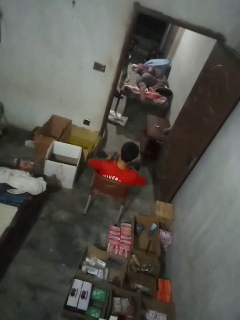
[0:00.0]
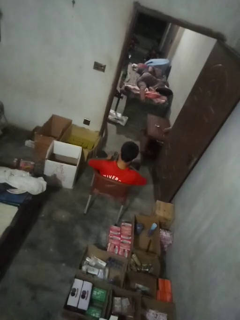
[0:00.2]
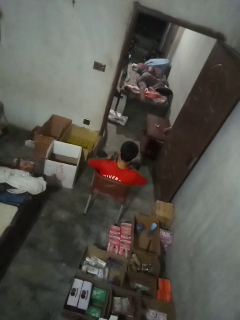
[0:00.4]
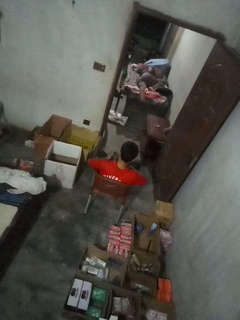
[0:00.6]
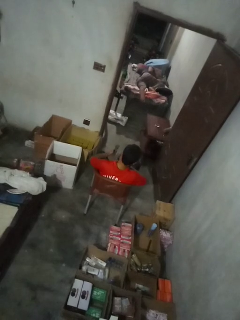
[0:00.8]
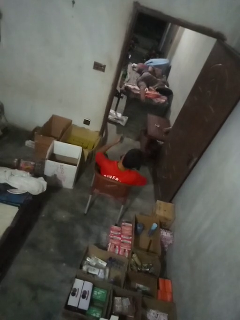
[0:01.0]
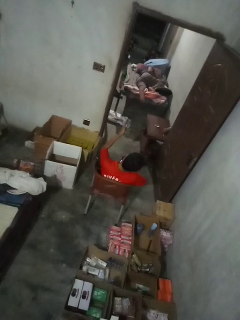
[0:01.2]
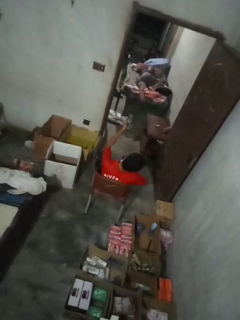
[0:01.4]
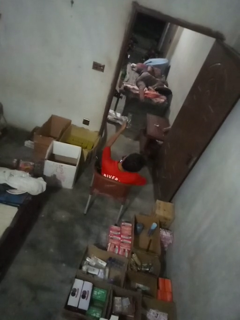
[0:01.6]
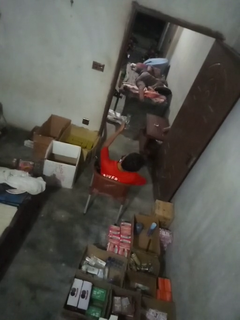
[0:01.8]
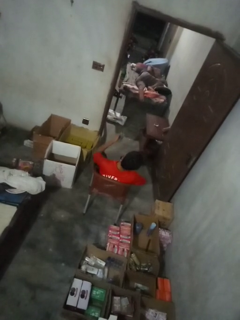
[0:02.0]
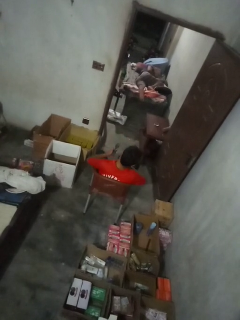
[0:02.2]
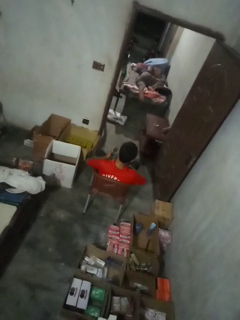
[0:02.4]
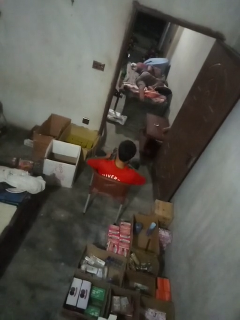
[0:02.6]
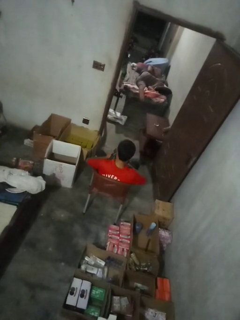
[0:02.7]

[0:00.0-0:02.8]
person uses television remote

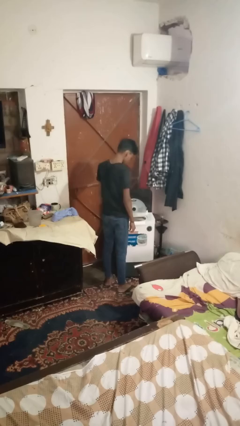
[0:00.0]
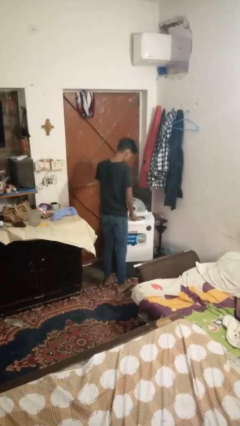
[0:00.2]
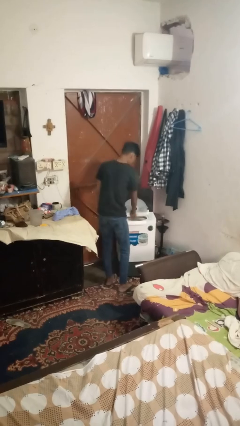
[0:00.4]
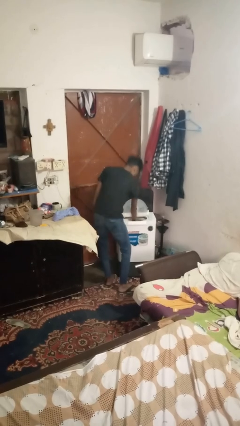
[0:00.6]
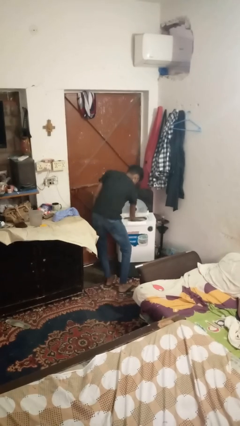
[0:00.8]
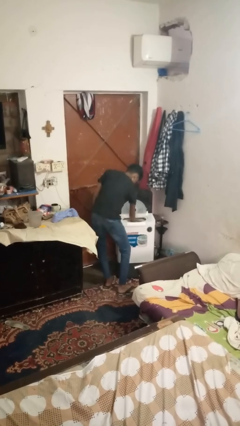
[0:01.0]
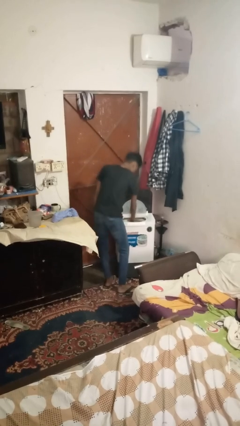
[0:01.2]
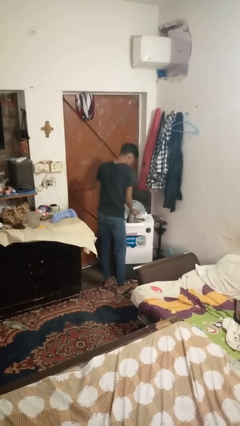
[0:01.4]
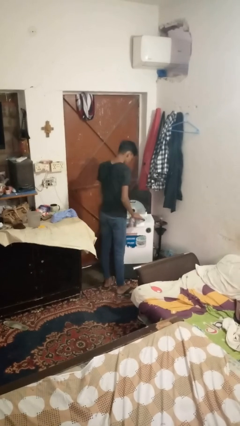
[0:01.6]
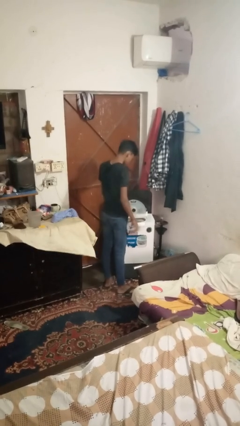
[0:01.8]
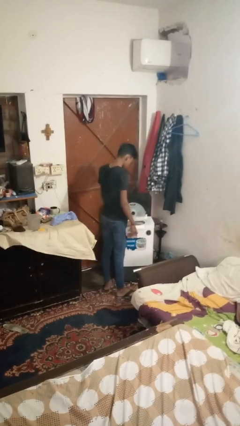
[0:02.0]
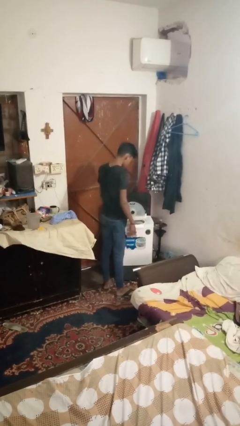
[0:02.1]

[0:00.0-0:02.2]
person unloads clotheswasher

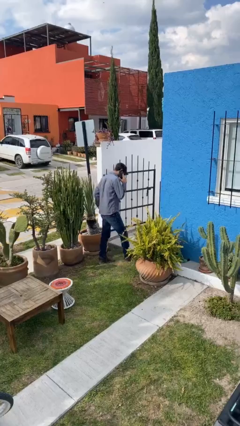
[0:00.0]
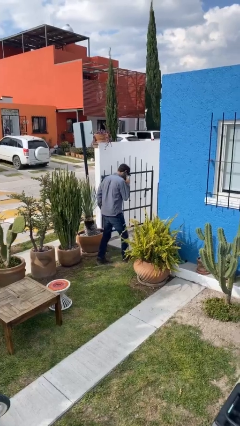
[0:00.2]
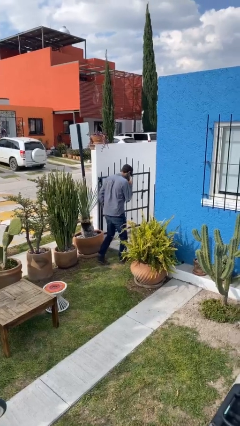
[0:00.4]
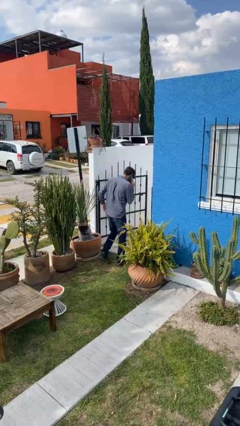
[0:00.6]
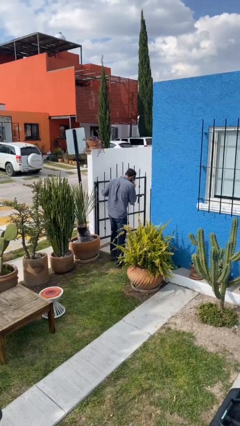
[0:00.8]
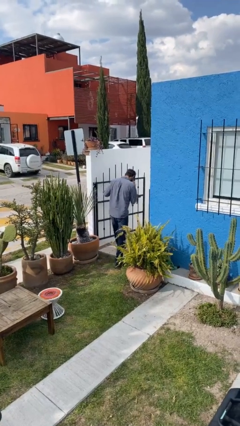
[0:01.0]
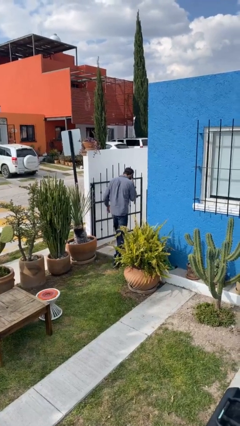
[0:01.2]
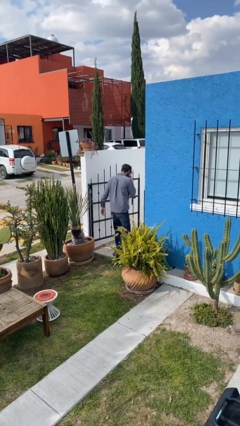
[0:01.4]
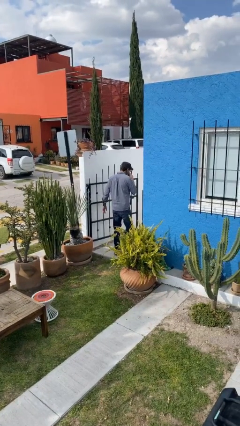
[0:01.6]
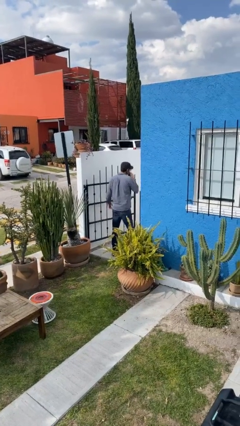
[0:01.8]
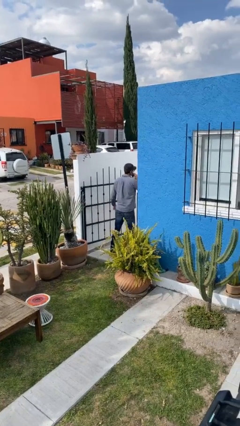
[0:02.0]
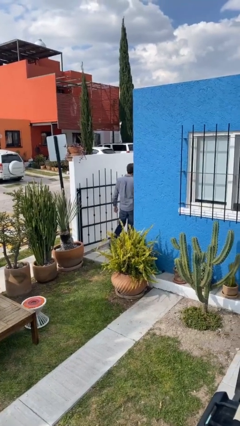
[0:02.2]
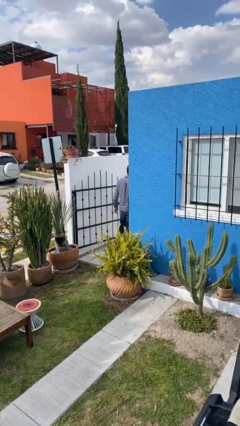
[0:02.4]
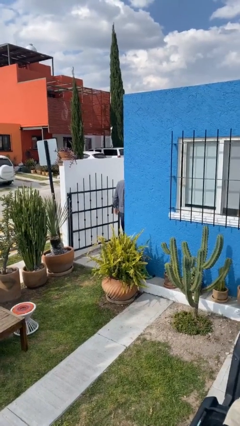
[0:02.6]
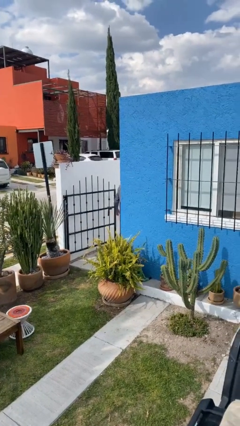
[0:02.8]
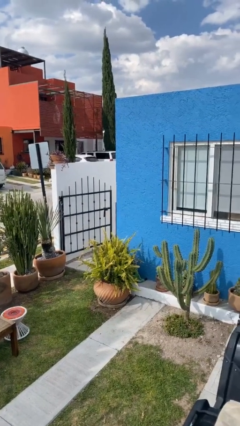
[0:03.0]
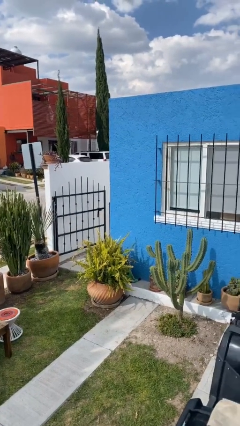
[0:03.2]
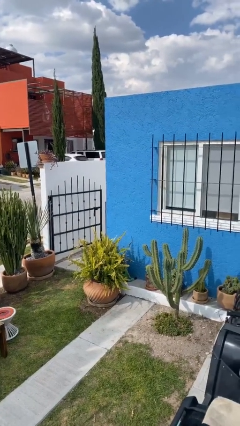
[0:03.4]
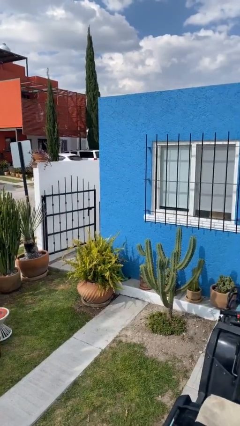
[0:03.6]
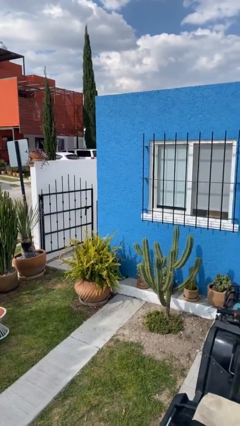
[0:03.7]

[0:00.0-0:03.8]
person exits scene through structure

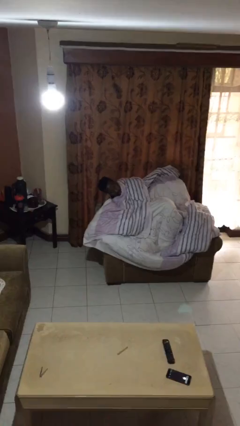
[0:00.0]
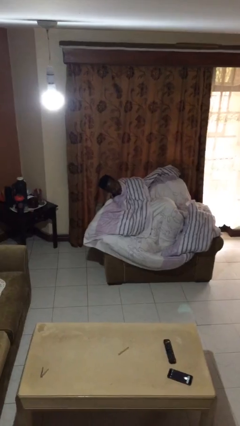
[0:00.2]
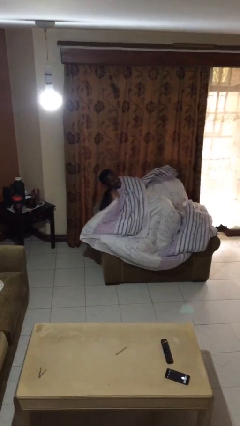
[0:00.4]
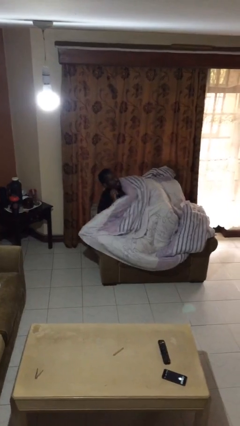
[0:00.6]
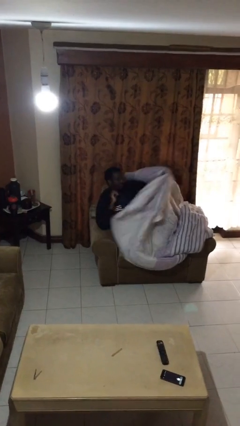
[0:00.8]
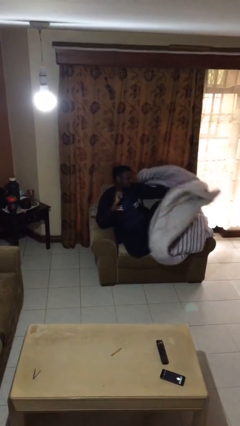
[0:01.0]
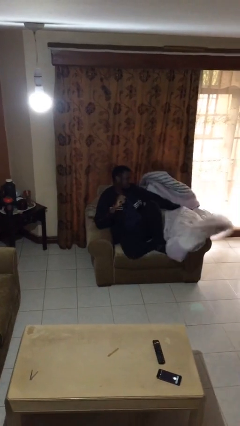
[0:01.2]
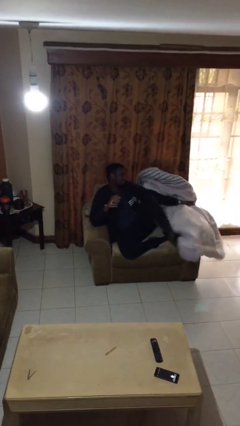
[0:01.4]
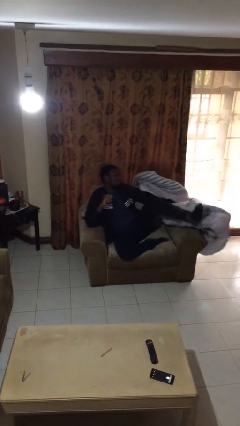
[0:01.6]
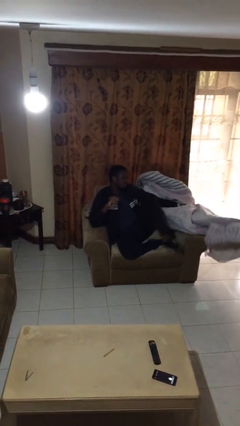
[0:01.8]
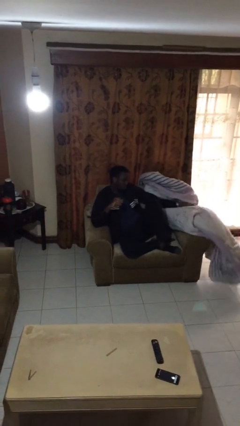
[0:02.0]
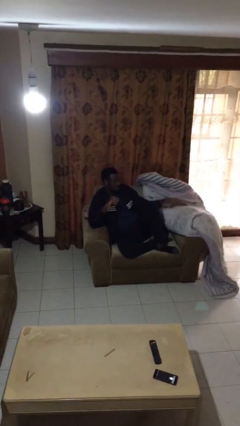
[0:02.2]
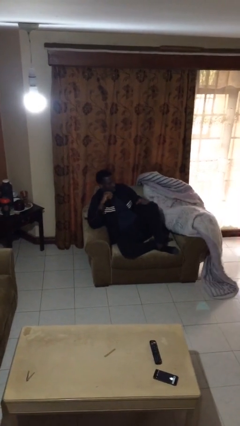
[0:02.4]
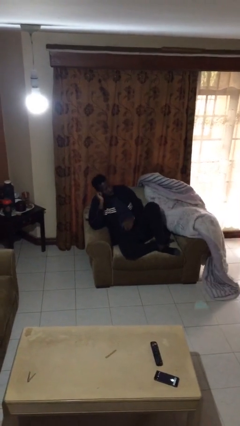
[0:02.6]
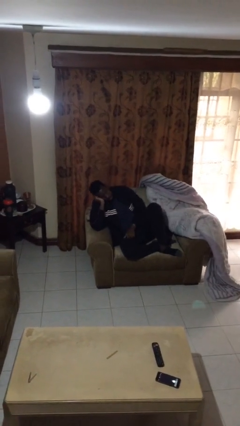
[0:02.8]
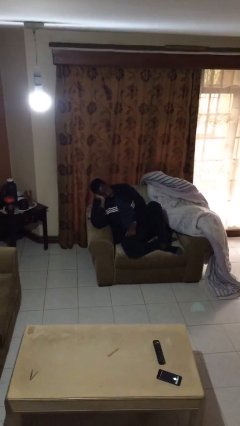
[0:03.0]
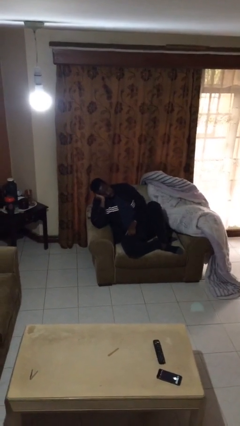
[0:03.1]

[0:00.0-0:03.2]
person uncovers with blanket

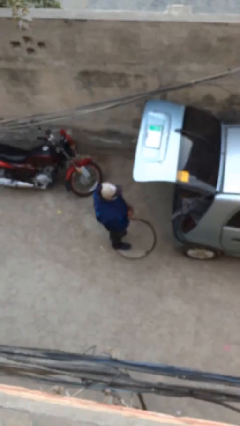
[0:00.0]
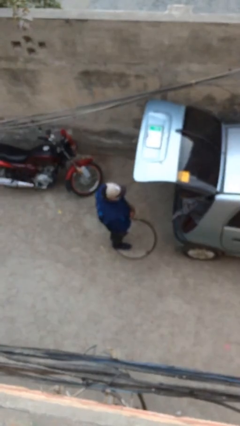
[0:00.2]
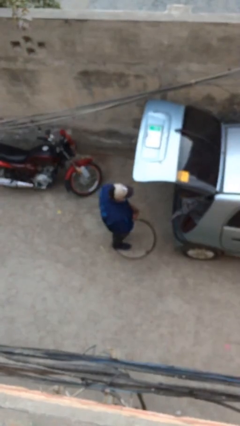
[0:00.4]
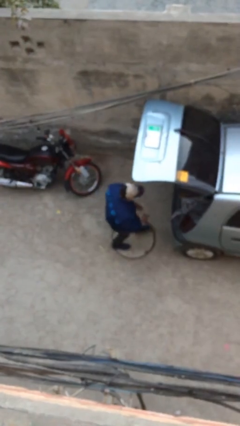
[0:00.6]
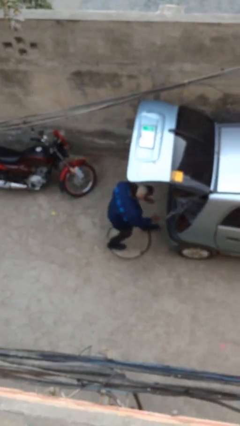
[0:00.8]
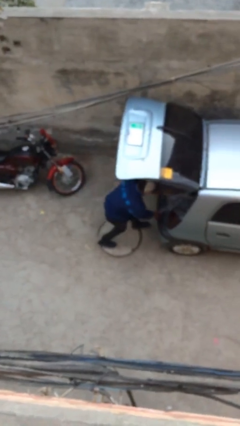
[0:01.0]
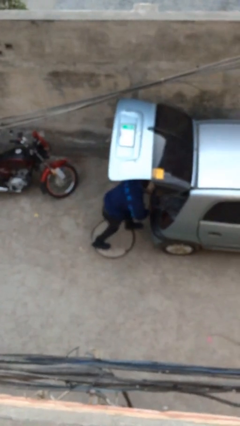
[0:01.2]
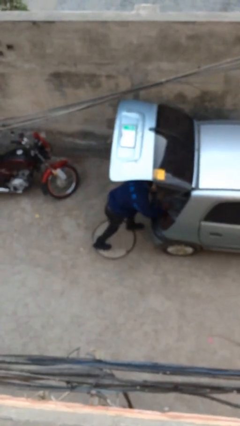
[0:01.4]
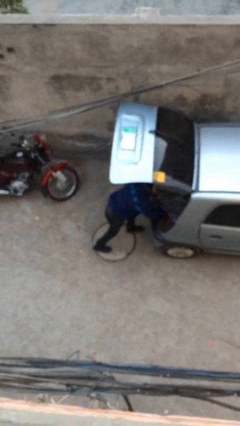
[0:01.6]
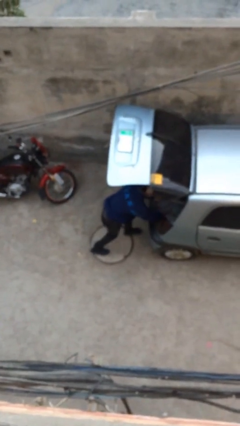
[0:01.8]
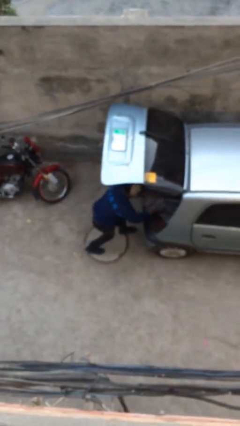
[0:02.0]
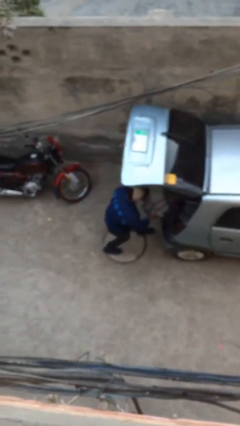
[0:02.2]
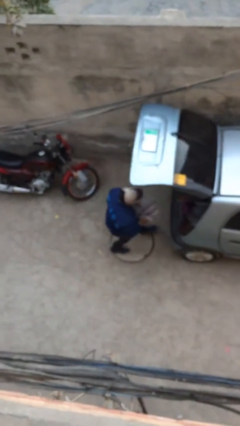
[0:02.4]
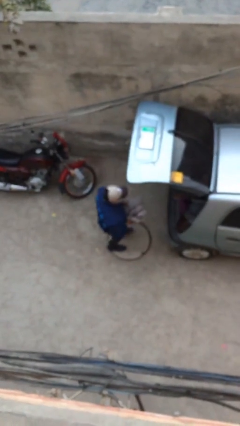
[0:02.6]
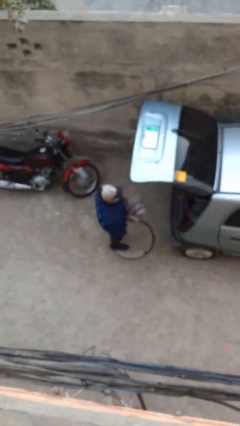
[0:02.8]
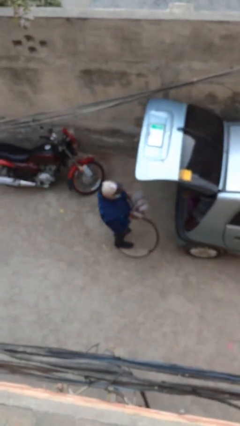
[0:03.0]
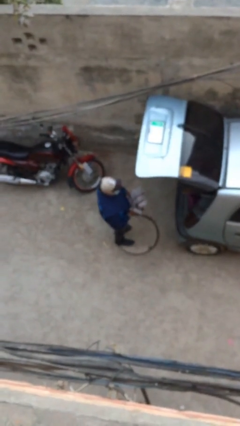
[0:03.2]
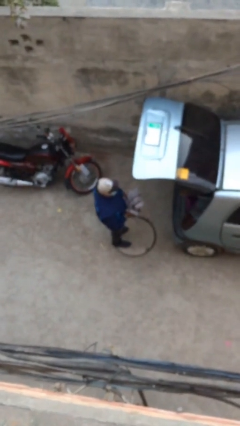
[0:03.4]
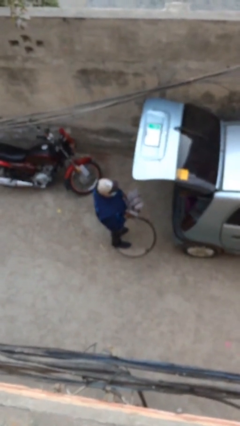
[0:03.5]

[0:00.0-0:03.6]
person unloads car

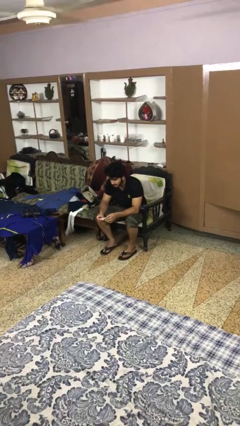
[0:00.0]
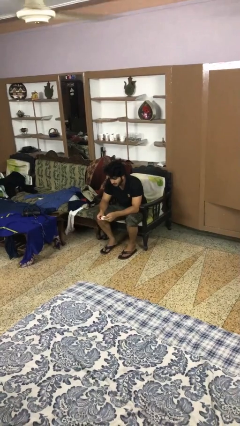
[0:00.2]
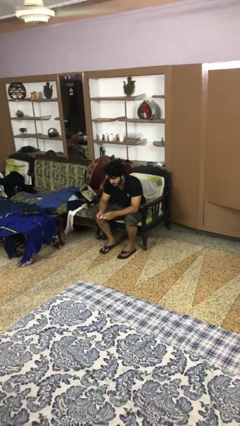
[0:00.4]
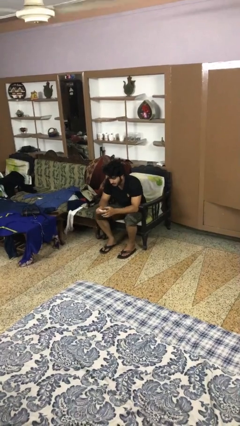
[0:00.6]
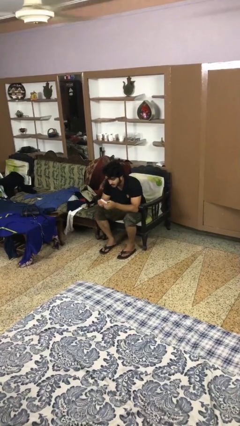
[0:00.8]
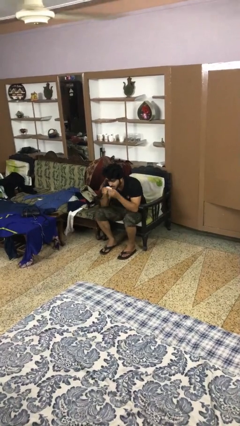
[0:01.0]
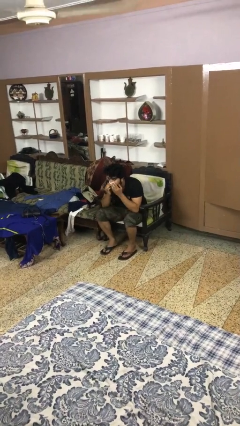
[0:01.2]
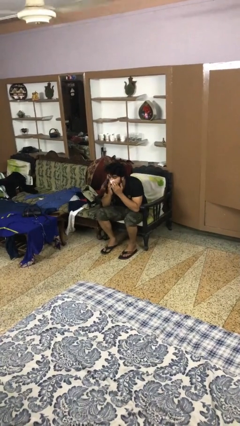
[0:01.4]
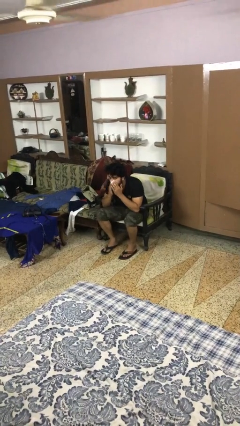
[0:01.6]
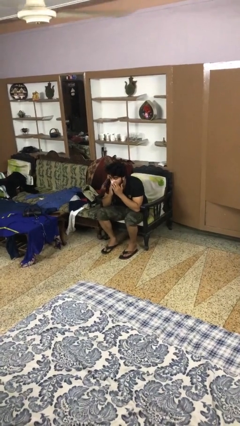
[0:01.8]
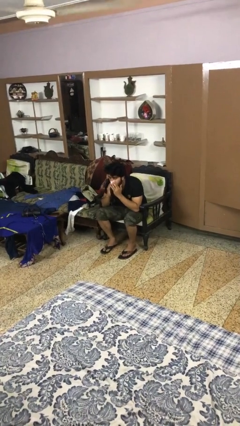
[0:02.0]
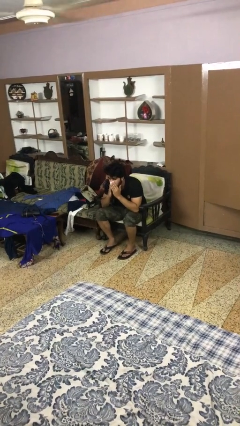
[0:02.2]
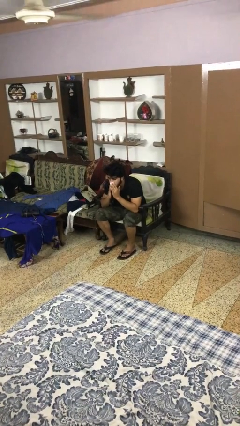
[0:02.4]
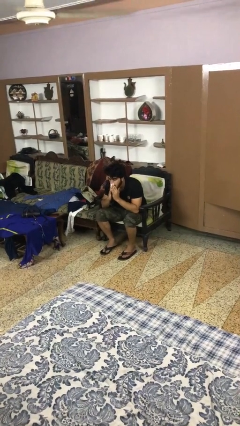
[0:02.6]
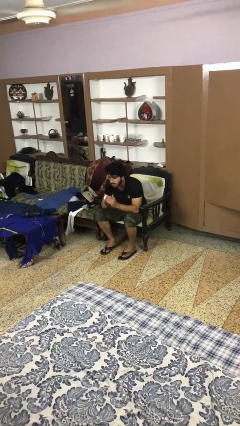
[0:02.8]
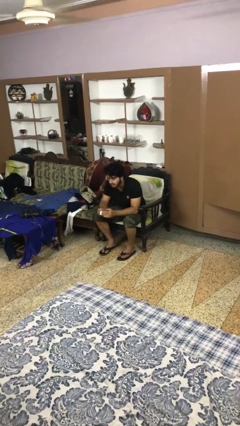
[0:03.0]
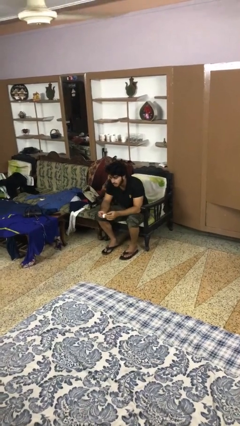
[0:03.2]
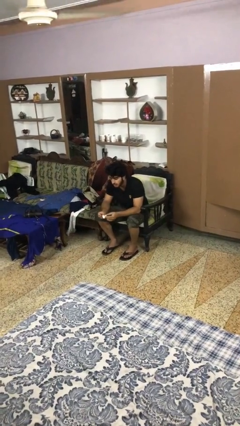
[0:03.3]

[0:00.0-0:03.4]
person blows nose
